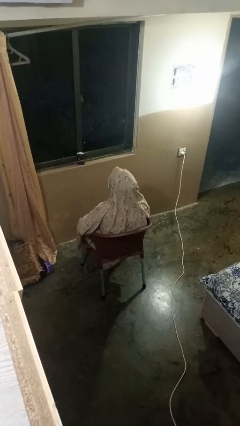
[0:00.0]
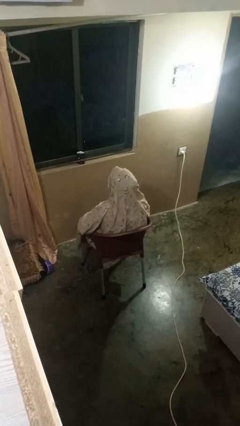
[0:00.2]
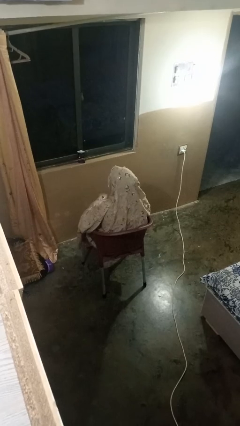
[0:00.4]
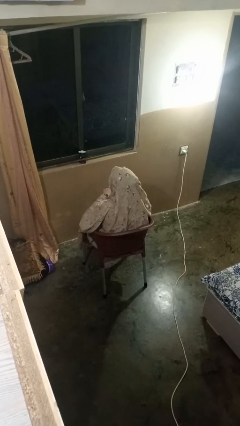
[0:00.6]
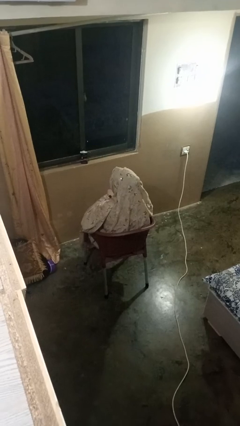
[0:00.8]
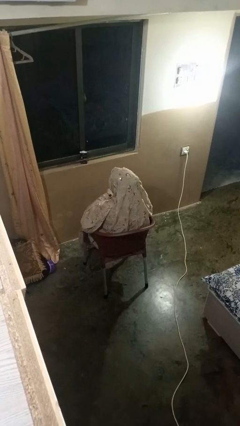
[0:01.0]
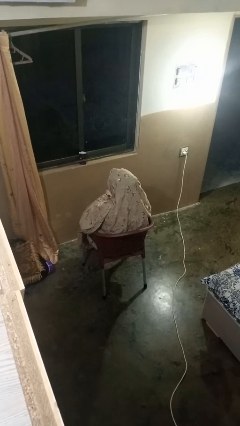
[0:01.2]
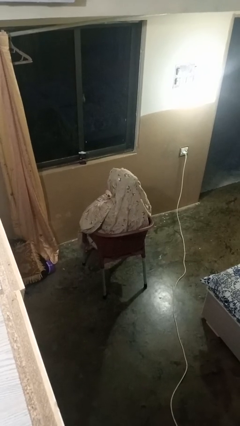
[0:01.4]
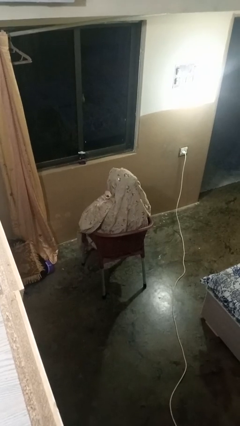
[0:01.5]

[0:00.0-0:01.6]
person looks at wristwatch

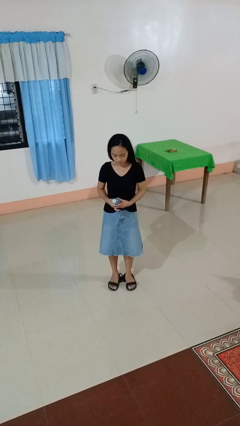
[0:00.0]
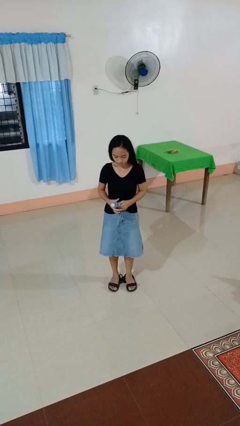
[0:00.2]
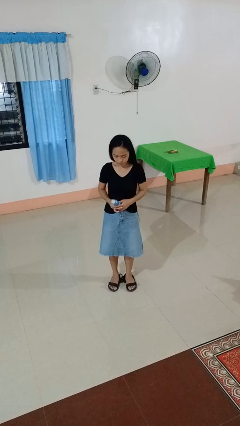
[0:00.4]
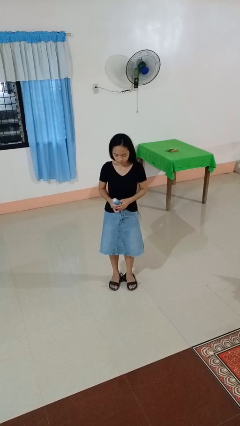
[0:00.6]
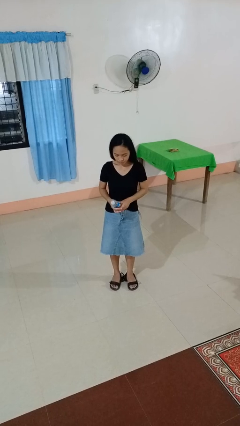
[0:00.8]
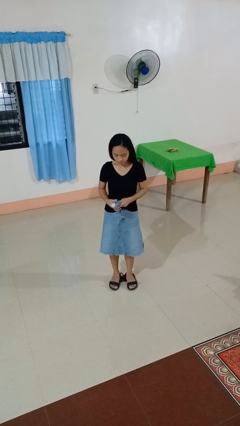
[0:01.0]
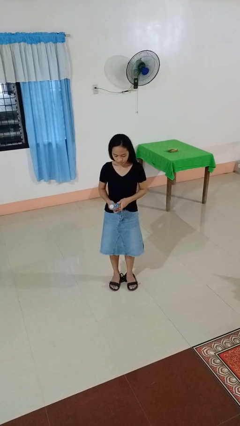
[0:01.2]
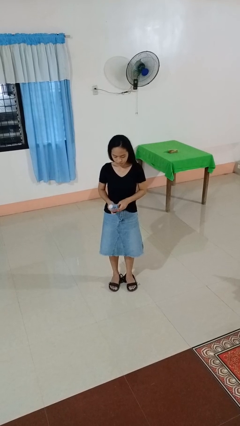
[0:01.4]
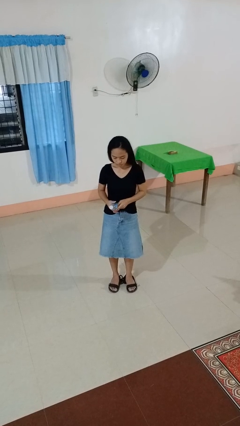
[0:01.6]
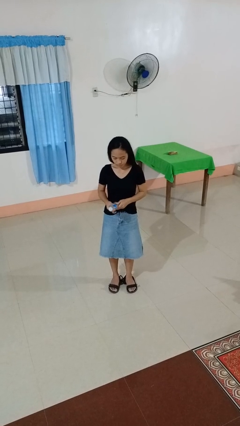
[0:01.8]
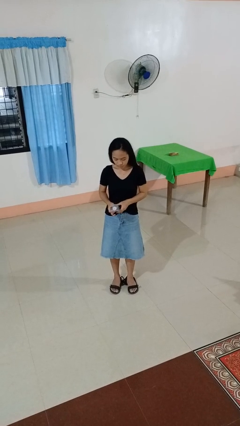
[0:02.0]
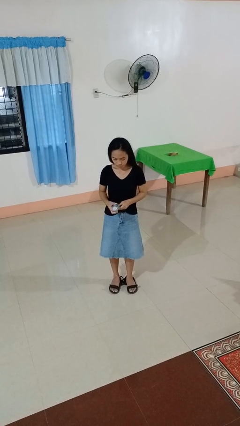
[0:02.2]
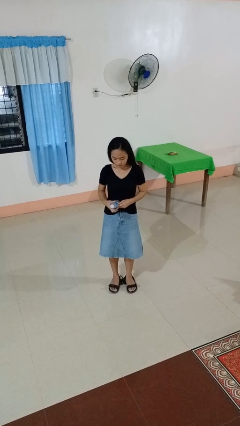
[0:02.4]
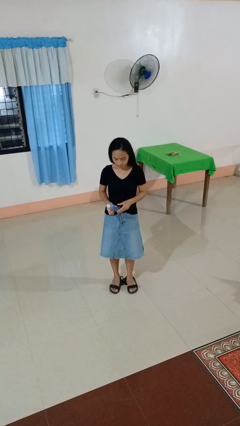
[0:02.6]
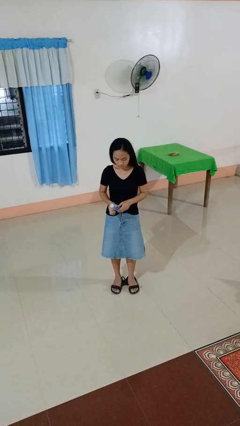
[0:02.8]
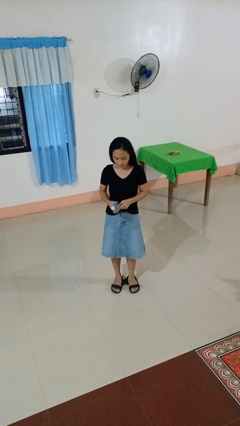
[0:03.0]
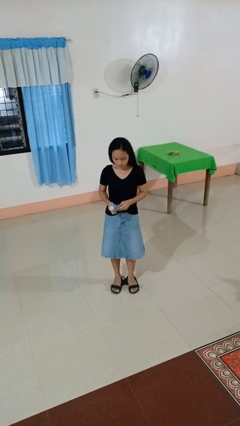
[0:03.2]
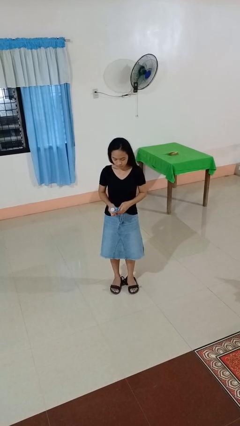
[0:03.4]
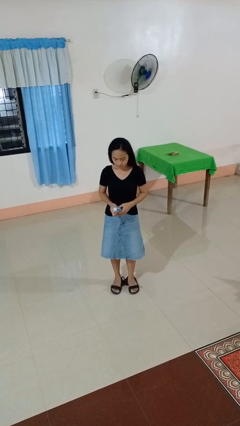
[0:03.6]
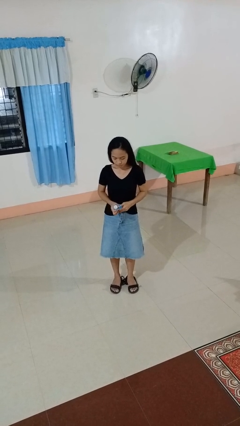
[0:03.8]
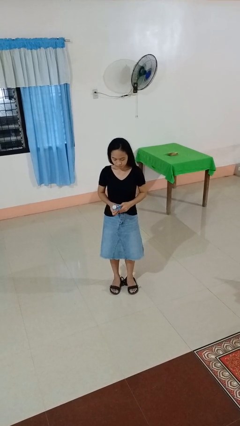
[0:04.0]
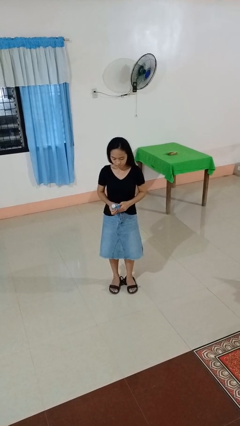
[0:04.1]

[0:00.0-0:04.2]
person squeezes object

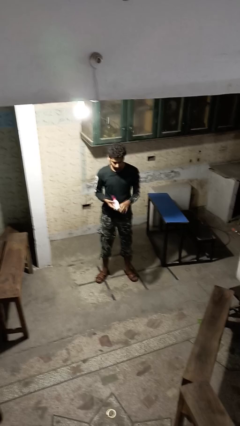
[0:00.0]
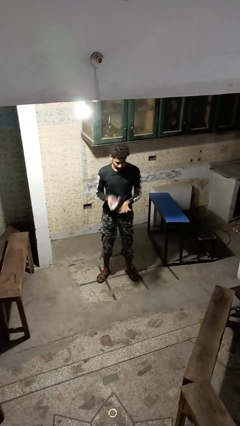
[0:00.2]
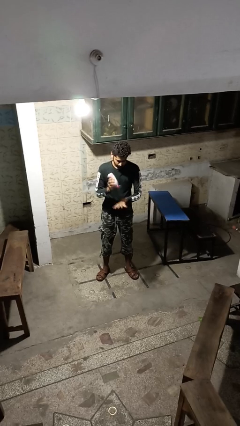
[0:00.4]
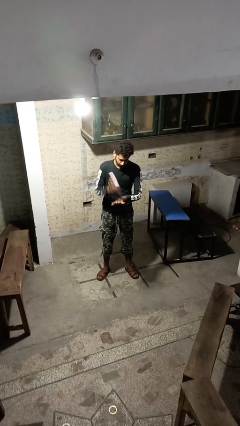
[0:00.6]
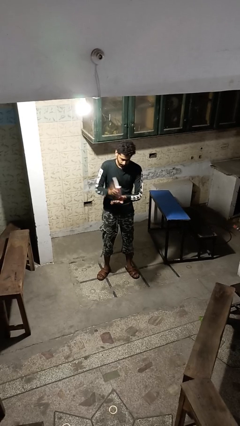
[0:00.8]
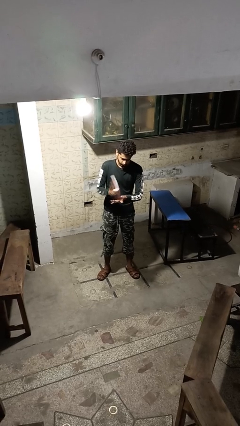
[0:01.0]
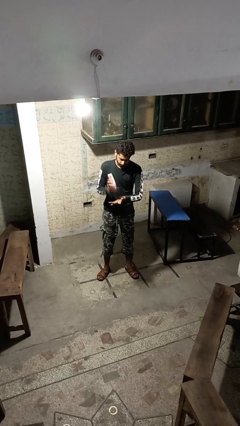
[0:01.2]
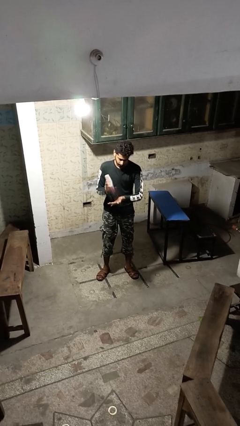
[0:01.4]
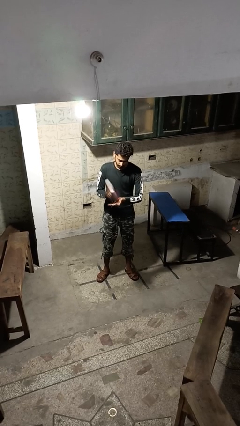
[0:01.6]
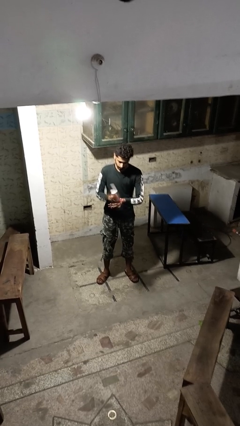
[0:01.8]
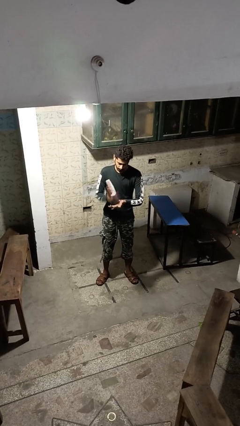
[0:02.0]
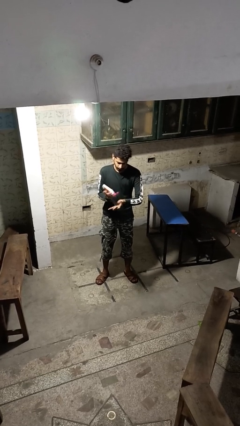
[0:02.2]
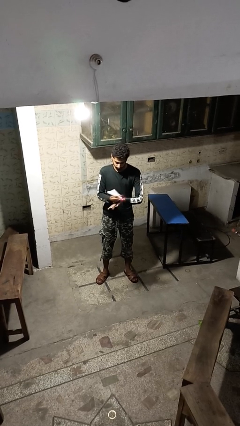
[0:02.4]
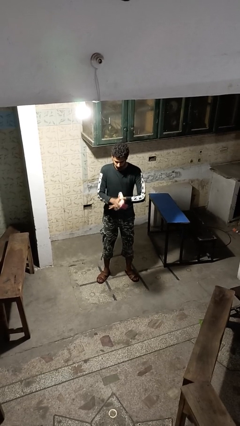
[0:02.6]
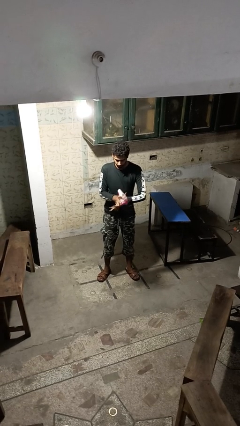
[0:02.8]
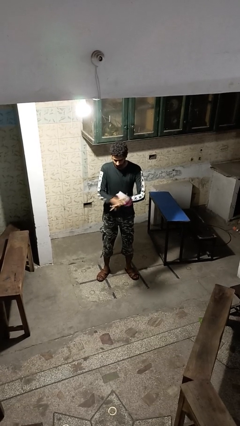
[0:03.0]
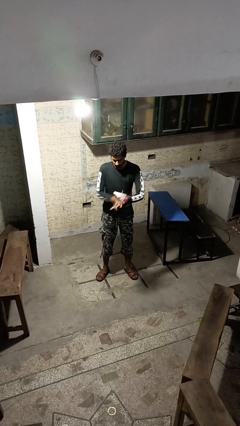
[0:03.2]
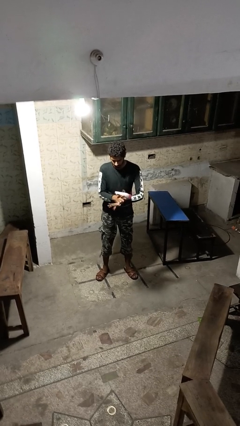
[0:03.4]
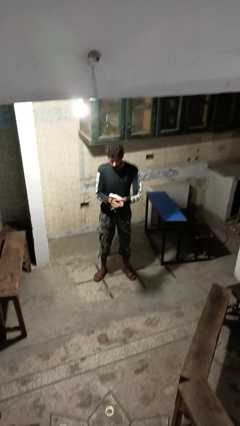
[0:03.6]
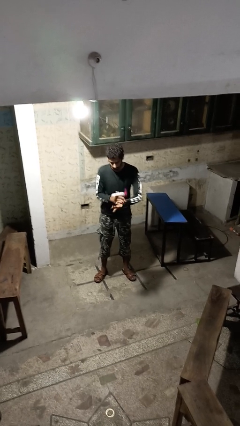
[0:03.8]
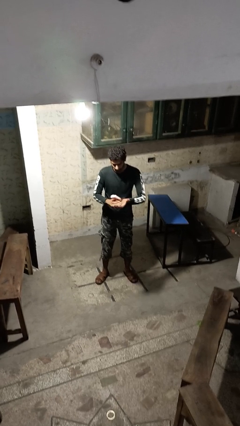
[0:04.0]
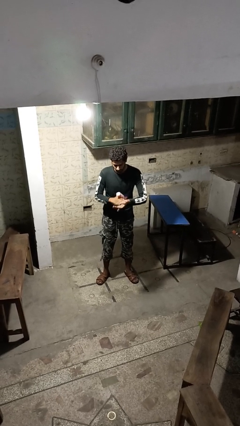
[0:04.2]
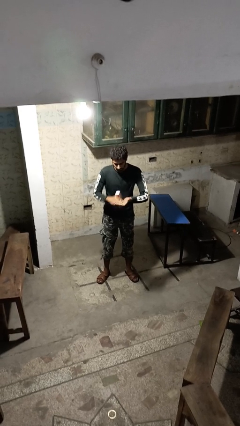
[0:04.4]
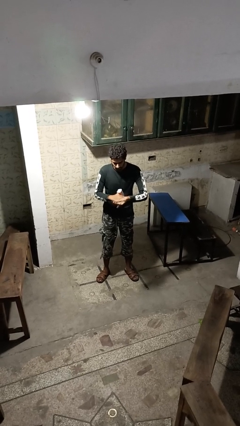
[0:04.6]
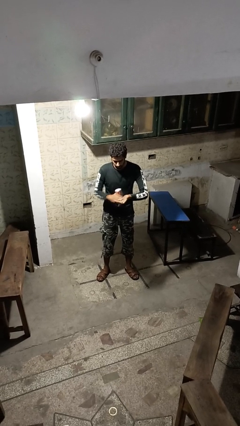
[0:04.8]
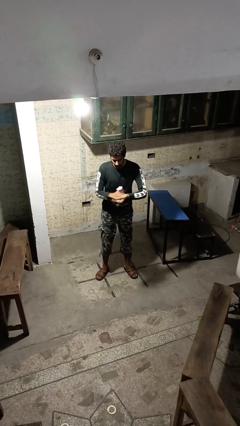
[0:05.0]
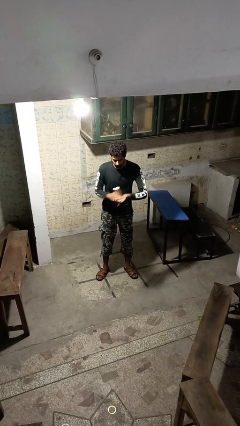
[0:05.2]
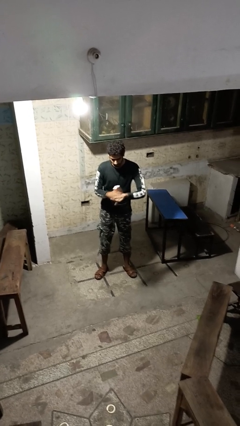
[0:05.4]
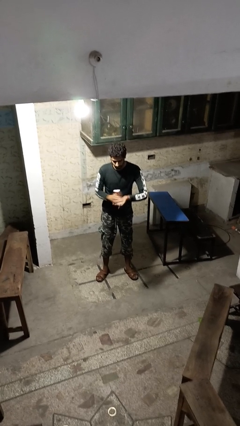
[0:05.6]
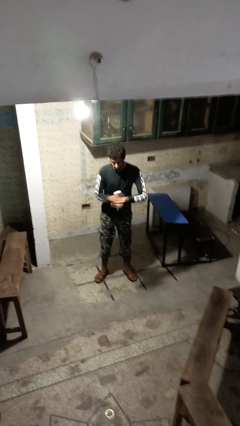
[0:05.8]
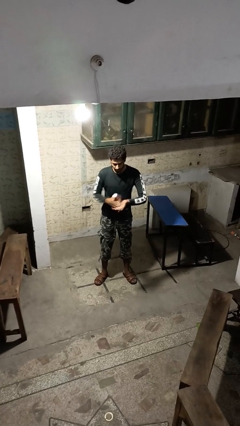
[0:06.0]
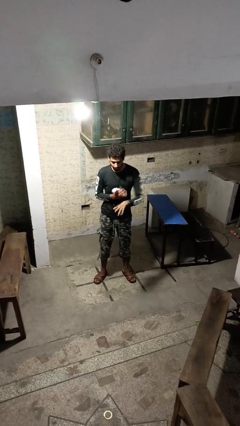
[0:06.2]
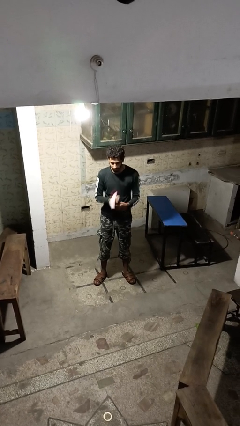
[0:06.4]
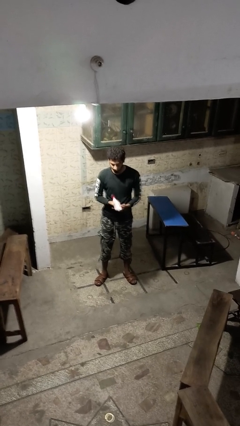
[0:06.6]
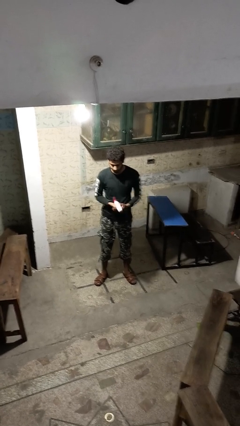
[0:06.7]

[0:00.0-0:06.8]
person applies sunscreen

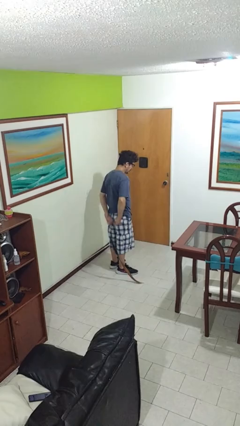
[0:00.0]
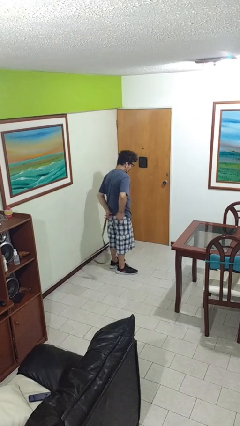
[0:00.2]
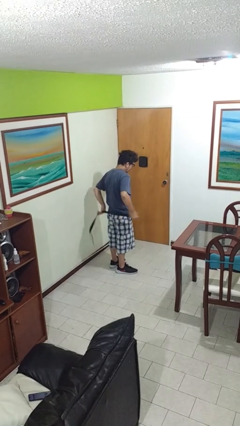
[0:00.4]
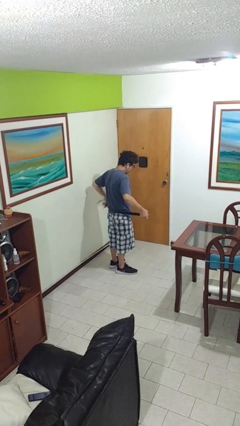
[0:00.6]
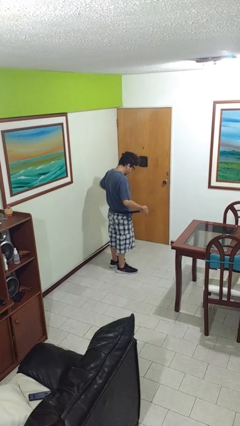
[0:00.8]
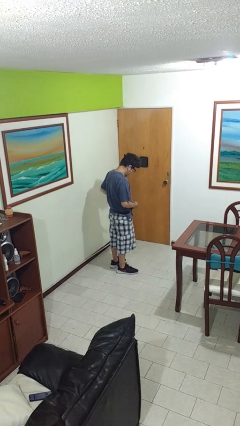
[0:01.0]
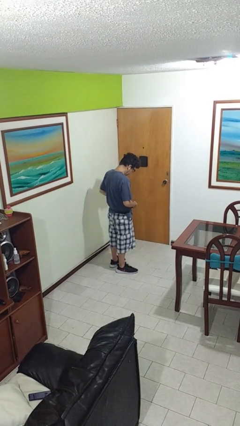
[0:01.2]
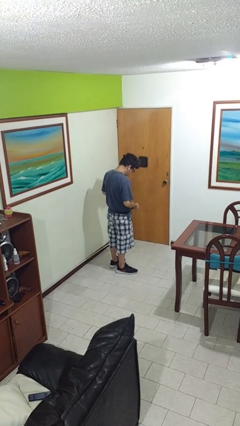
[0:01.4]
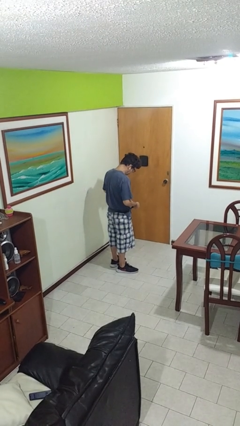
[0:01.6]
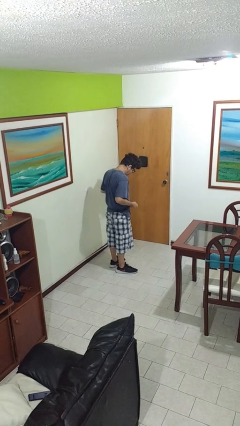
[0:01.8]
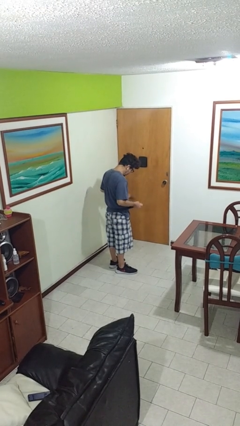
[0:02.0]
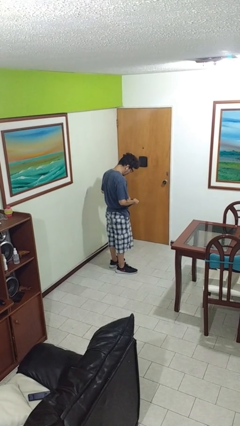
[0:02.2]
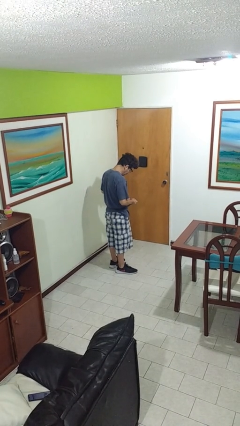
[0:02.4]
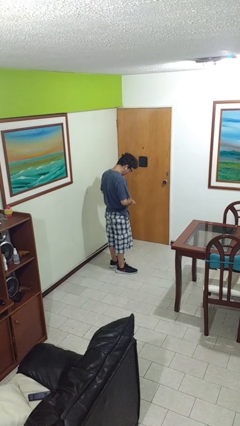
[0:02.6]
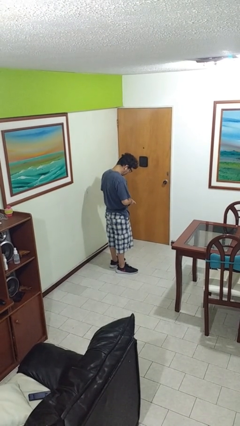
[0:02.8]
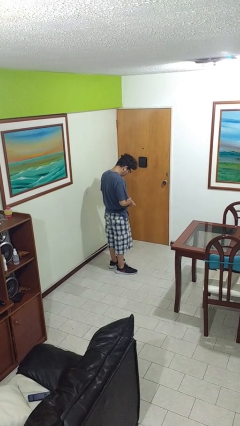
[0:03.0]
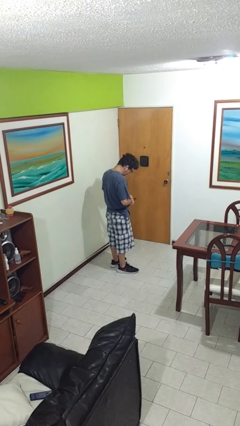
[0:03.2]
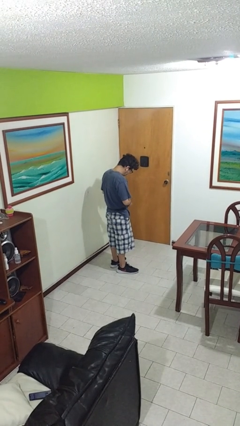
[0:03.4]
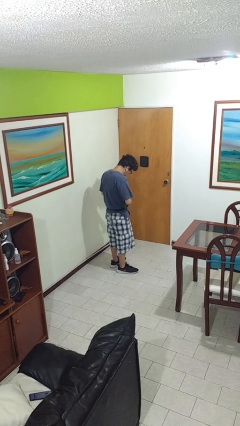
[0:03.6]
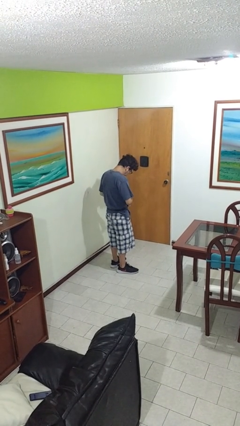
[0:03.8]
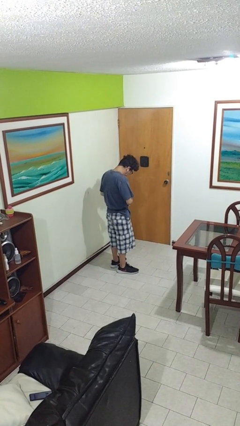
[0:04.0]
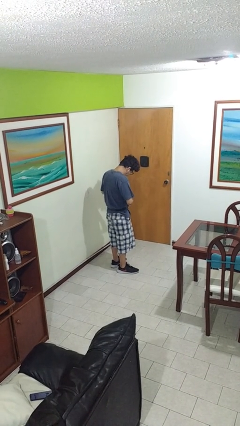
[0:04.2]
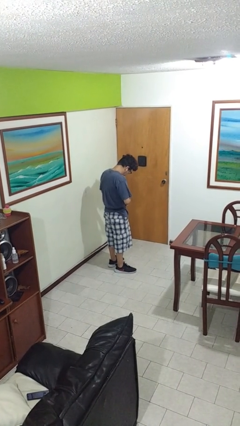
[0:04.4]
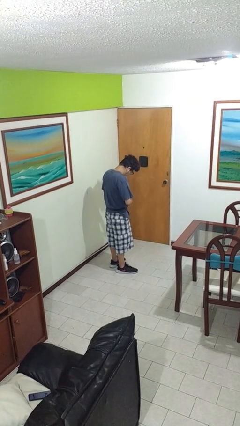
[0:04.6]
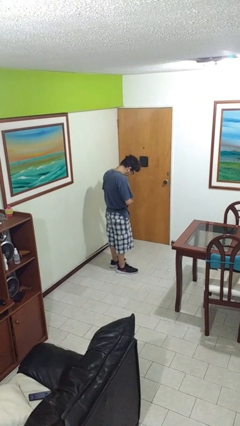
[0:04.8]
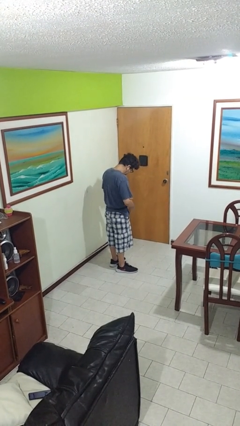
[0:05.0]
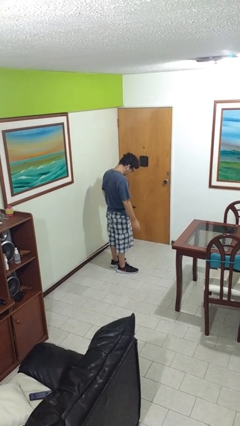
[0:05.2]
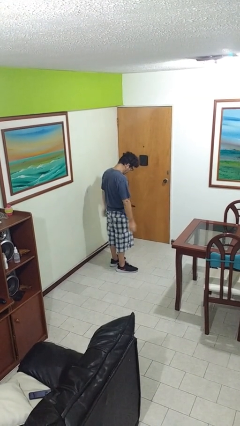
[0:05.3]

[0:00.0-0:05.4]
person puts on belt
